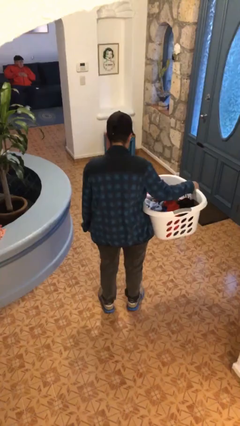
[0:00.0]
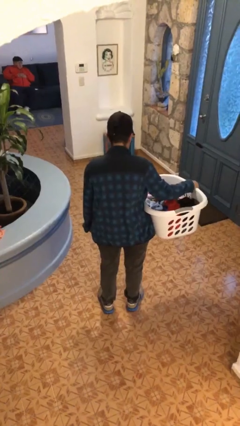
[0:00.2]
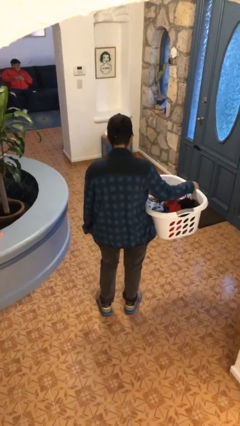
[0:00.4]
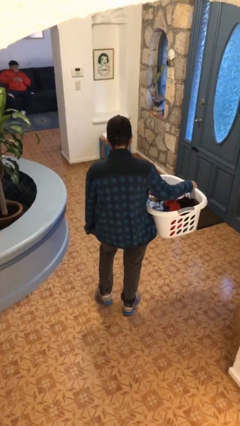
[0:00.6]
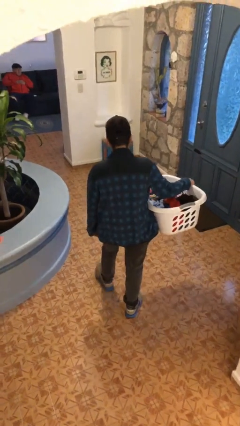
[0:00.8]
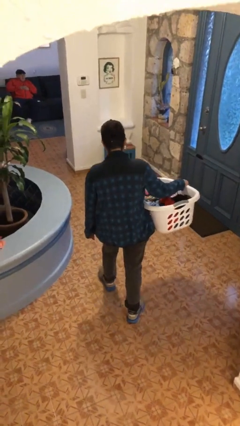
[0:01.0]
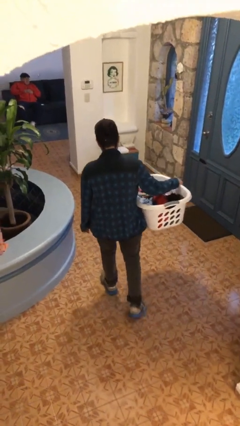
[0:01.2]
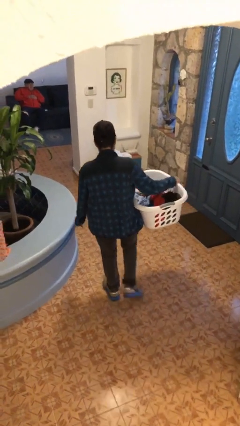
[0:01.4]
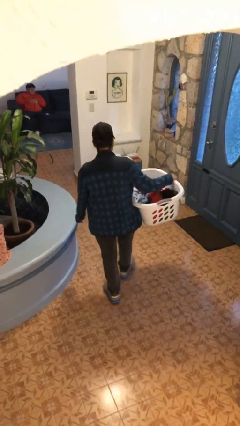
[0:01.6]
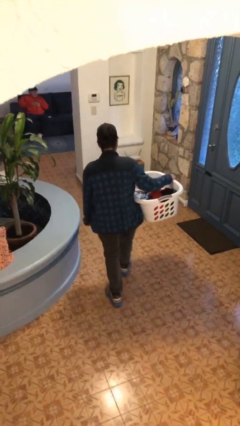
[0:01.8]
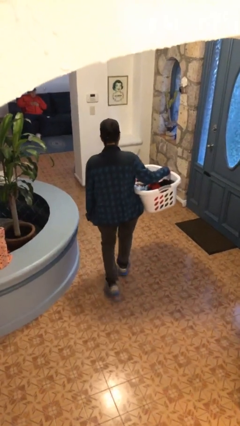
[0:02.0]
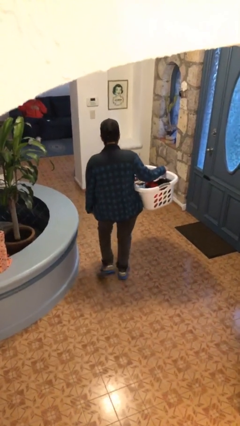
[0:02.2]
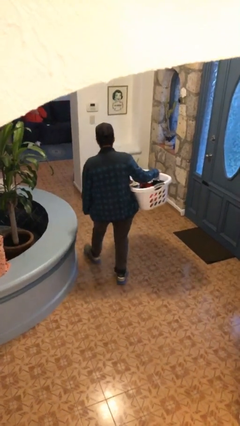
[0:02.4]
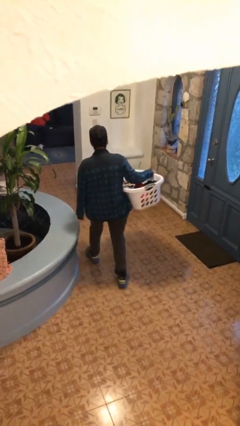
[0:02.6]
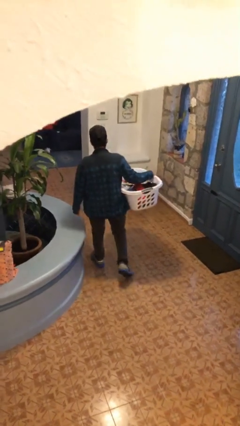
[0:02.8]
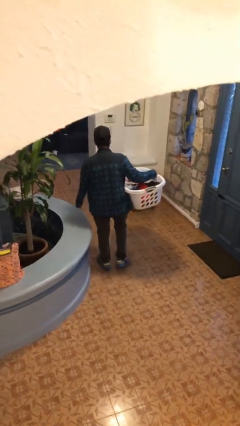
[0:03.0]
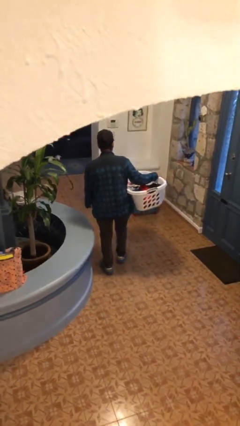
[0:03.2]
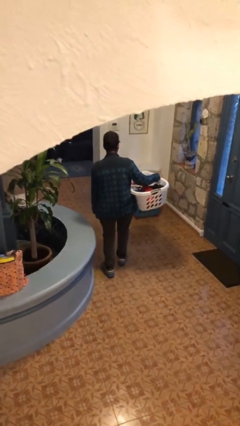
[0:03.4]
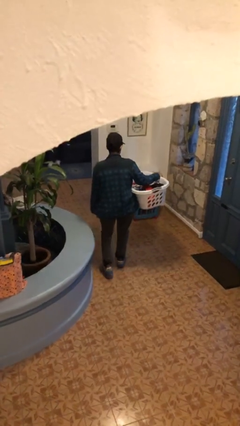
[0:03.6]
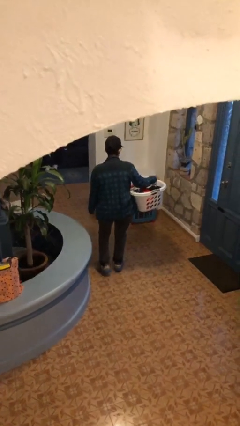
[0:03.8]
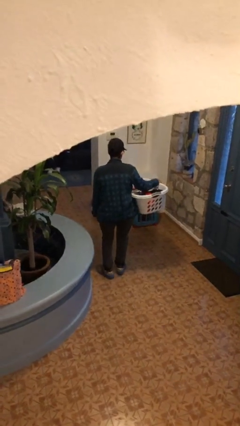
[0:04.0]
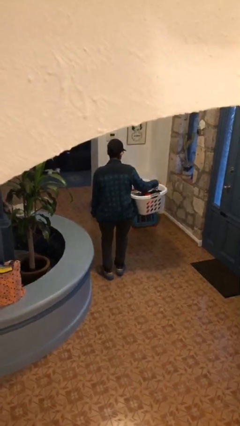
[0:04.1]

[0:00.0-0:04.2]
person carries laundry basket

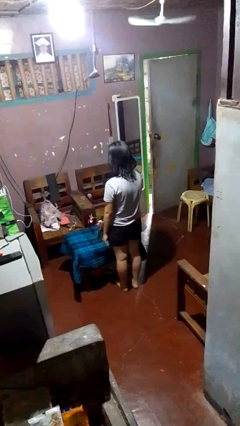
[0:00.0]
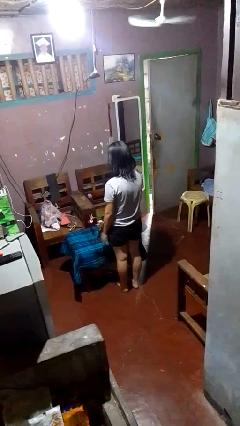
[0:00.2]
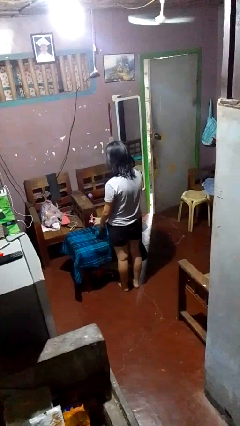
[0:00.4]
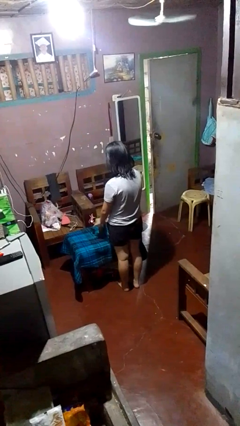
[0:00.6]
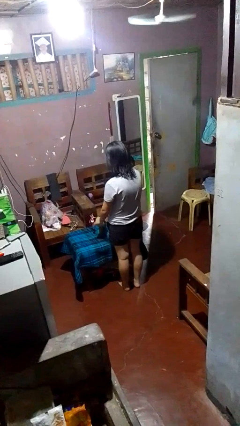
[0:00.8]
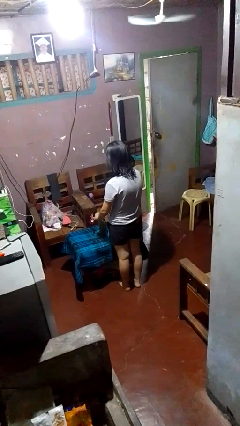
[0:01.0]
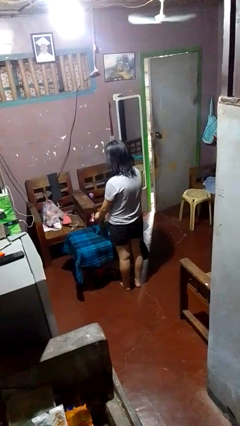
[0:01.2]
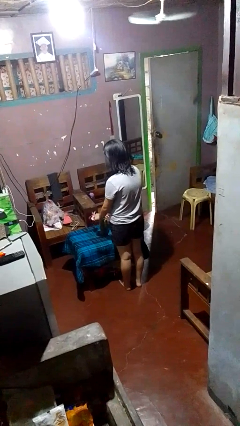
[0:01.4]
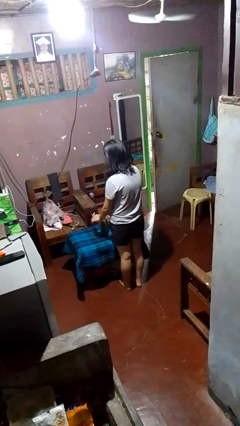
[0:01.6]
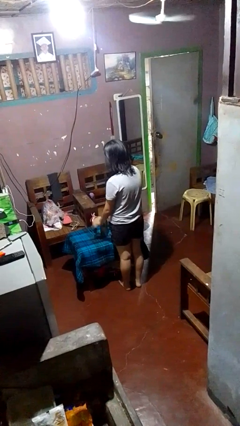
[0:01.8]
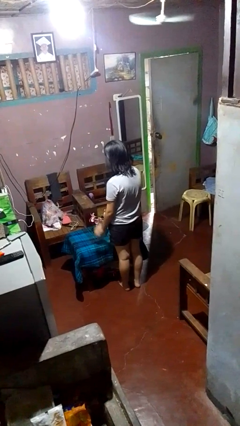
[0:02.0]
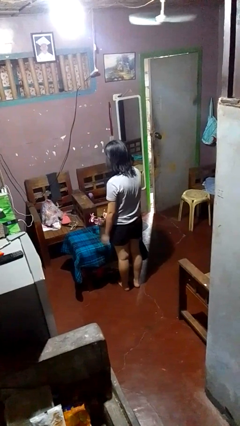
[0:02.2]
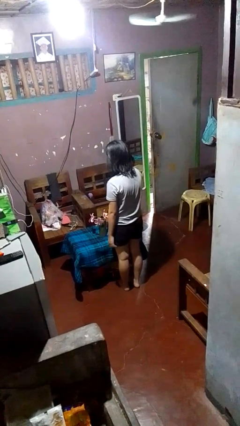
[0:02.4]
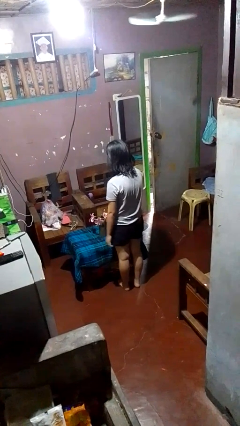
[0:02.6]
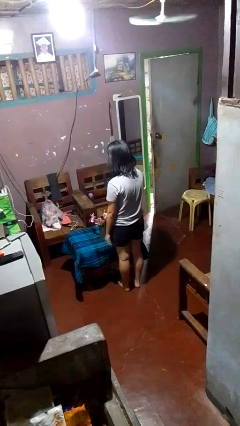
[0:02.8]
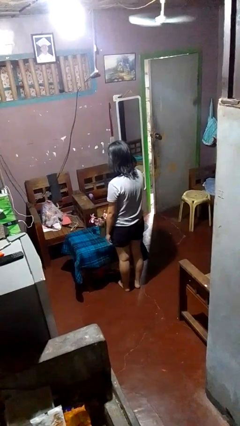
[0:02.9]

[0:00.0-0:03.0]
person arranges flowers in vase

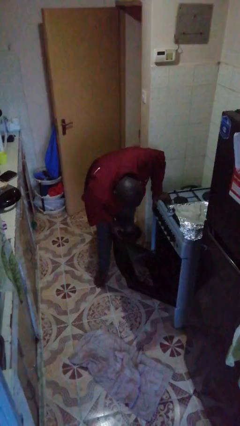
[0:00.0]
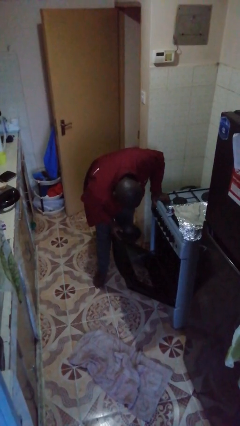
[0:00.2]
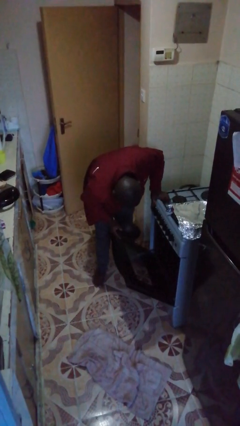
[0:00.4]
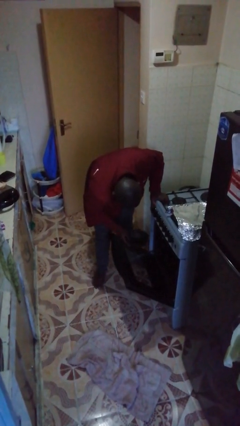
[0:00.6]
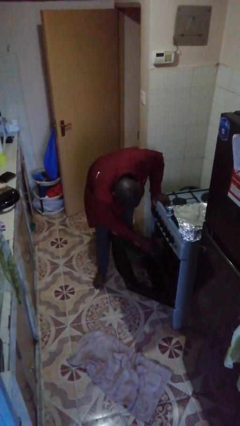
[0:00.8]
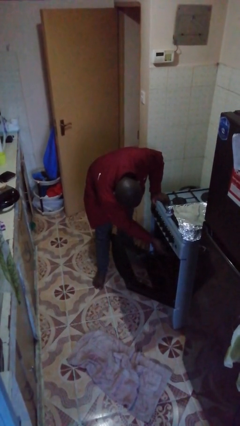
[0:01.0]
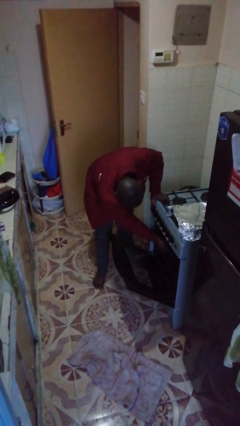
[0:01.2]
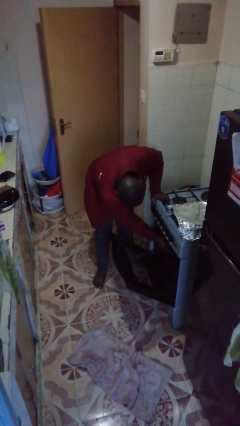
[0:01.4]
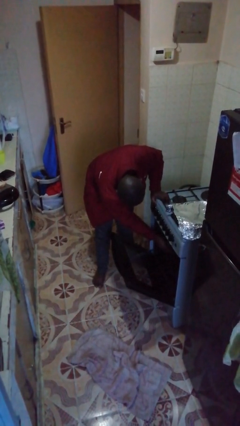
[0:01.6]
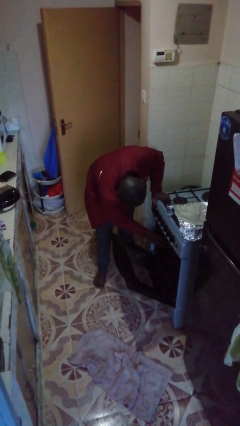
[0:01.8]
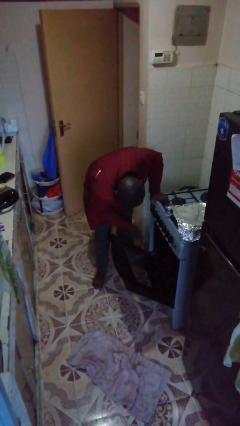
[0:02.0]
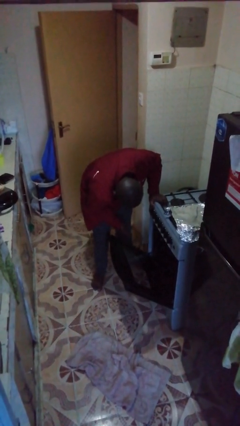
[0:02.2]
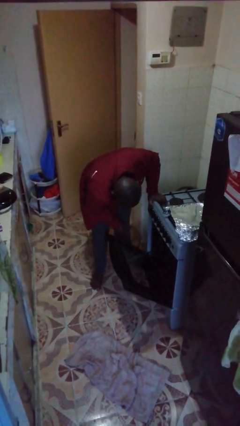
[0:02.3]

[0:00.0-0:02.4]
person puts object into oven

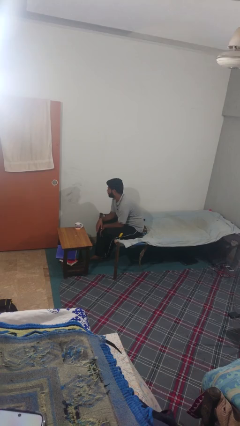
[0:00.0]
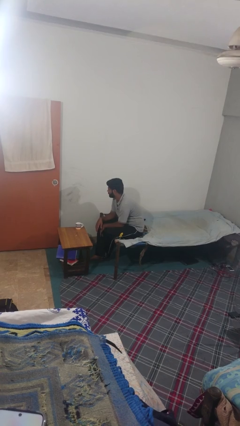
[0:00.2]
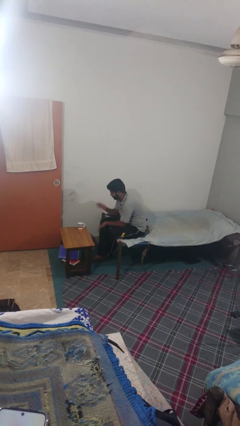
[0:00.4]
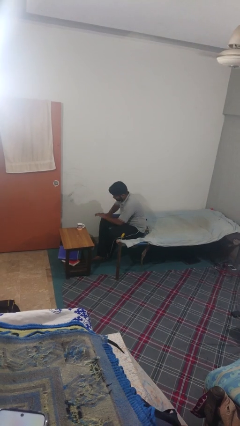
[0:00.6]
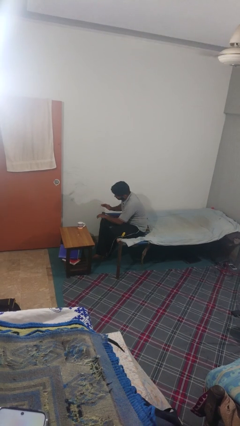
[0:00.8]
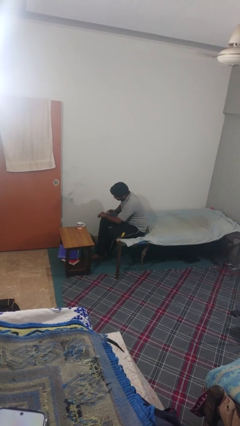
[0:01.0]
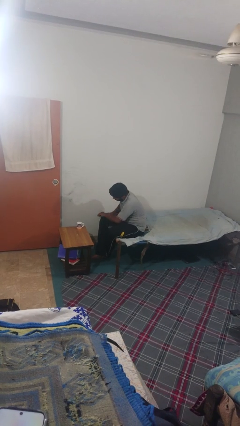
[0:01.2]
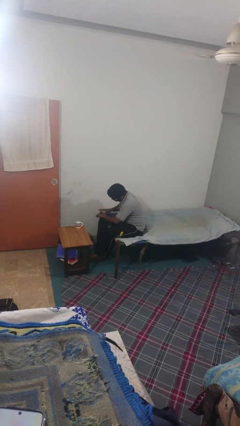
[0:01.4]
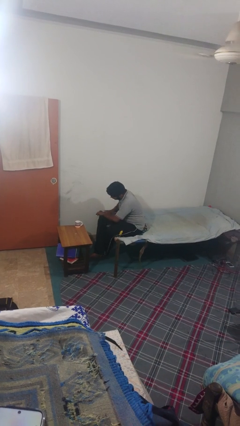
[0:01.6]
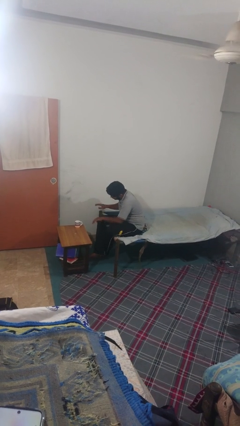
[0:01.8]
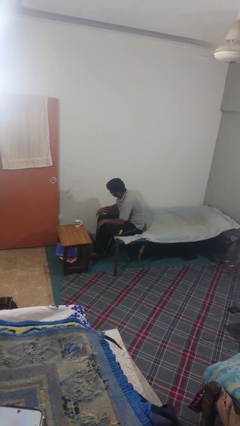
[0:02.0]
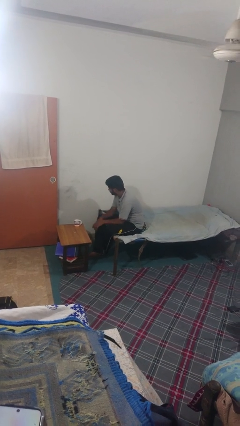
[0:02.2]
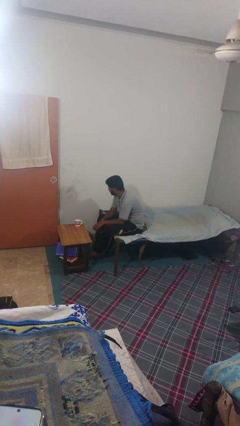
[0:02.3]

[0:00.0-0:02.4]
person swats bug

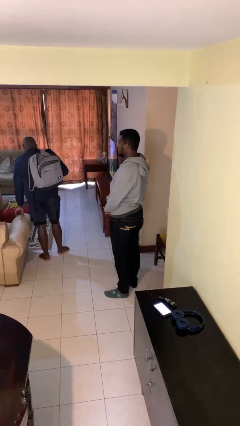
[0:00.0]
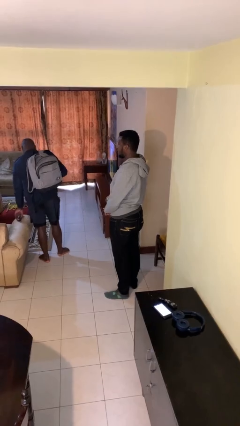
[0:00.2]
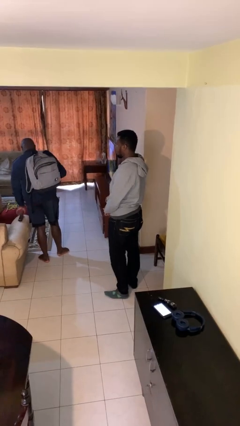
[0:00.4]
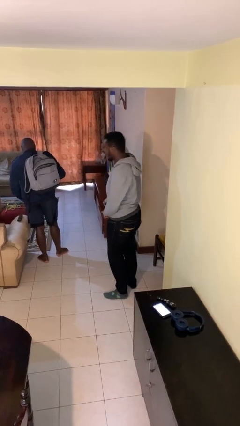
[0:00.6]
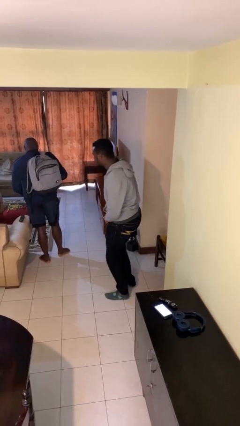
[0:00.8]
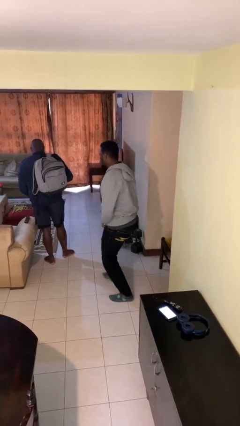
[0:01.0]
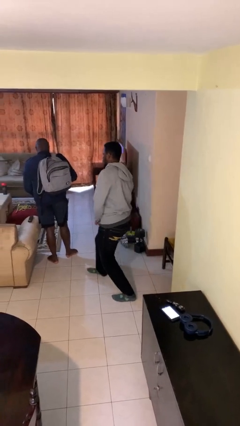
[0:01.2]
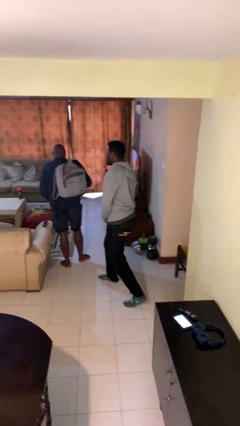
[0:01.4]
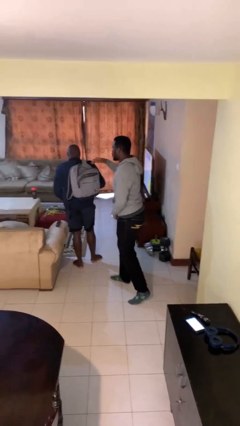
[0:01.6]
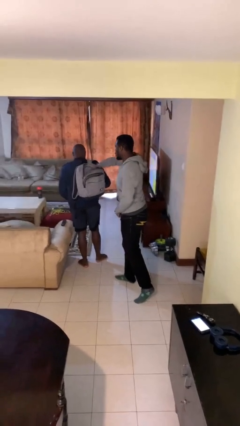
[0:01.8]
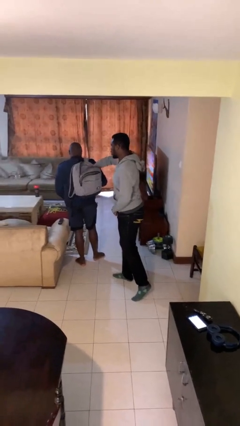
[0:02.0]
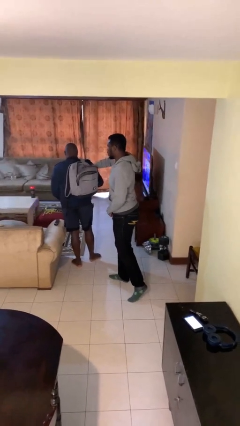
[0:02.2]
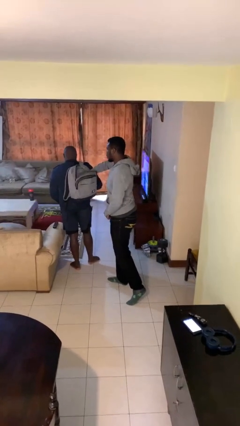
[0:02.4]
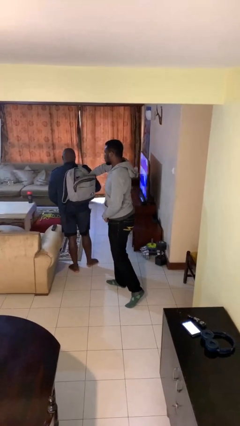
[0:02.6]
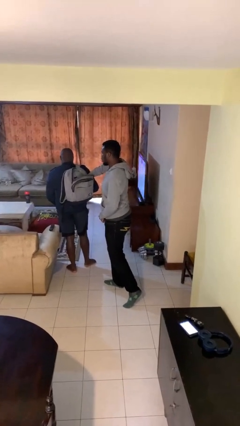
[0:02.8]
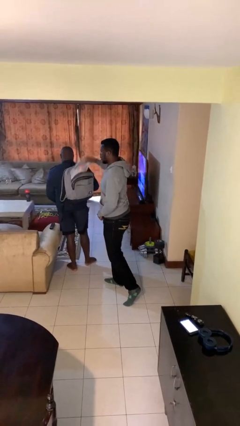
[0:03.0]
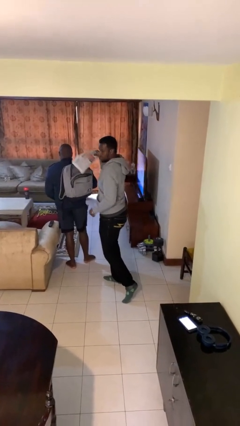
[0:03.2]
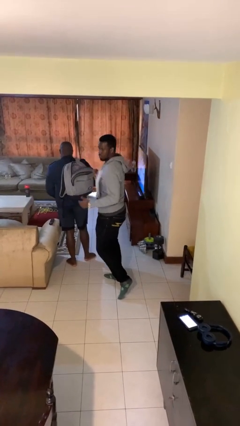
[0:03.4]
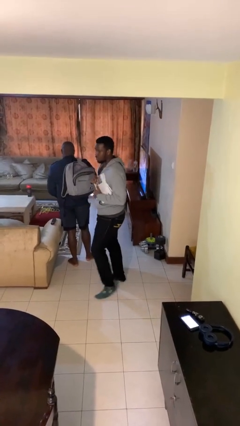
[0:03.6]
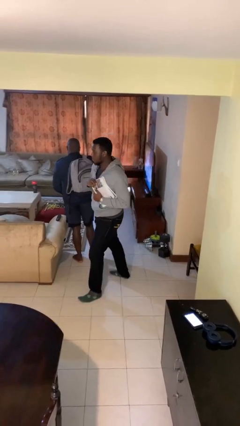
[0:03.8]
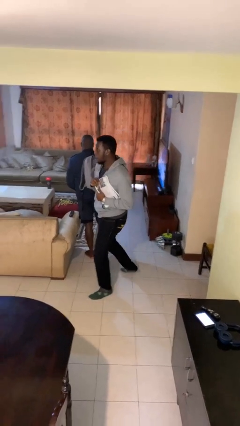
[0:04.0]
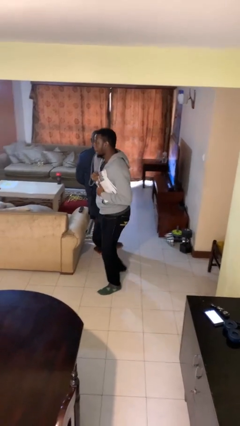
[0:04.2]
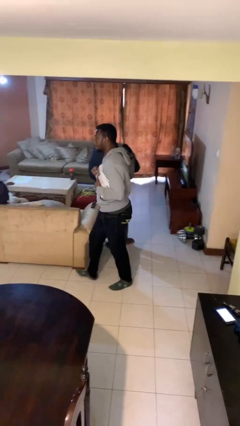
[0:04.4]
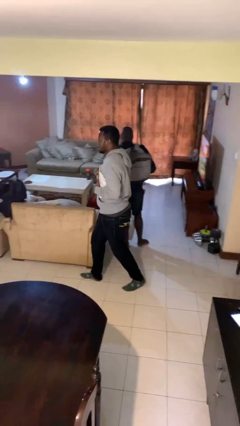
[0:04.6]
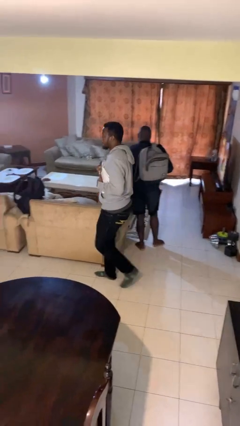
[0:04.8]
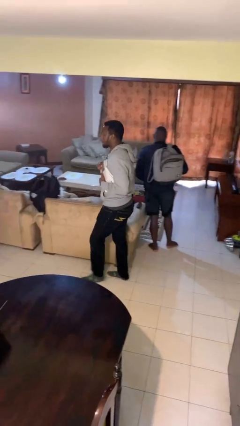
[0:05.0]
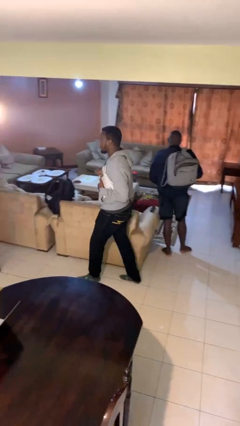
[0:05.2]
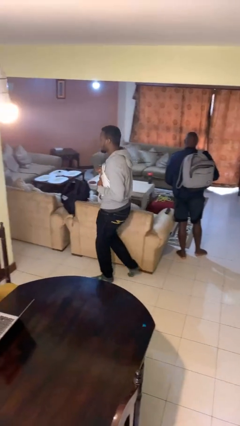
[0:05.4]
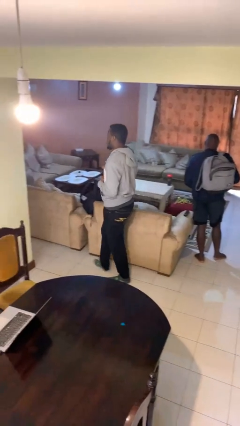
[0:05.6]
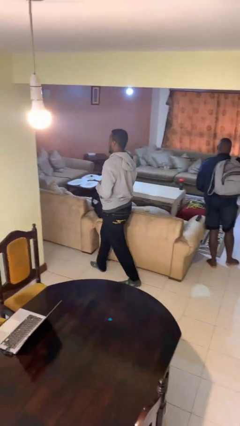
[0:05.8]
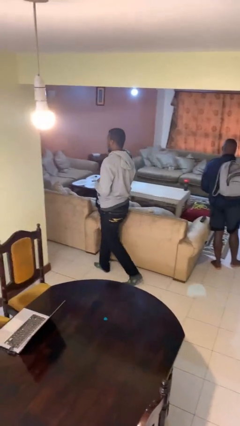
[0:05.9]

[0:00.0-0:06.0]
person steals object from person
